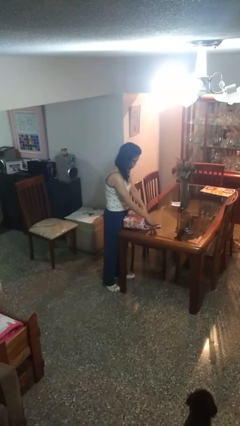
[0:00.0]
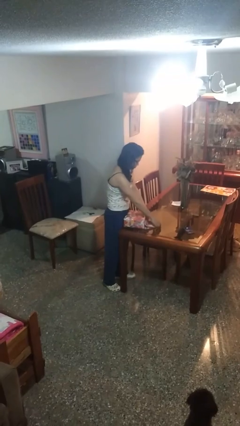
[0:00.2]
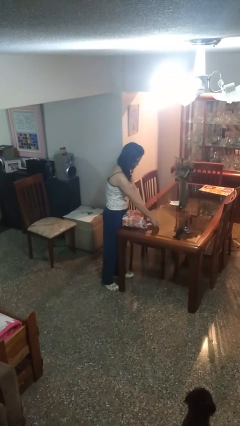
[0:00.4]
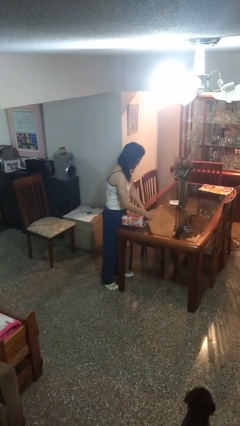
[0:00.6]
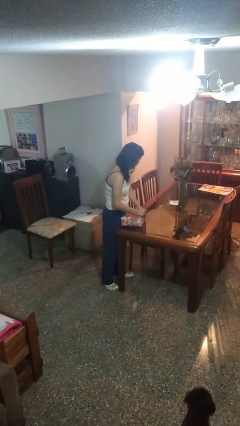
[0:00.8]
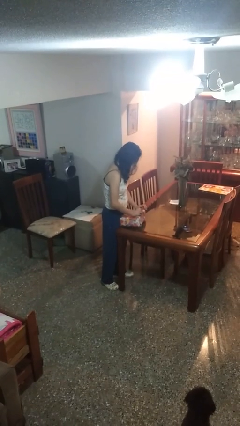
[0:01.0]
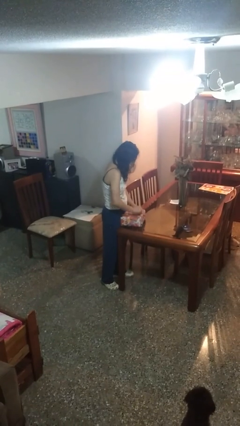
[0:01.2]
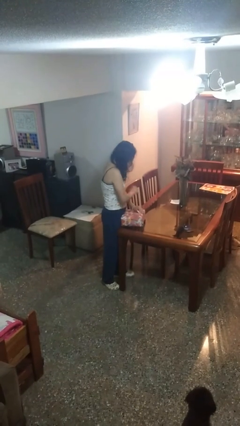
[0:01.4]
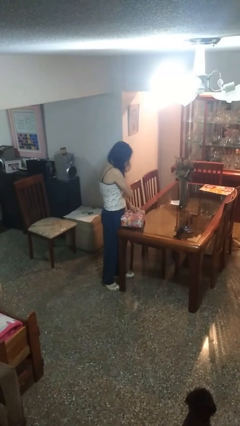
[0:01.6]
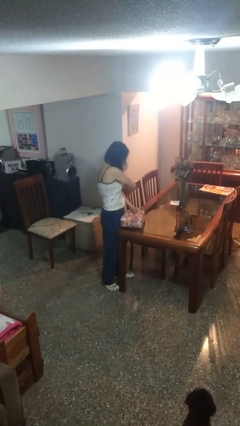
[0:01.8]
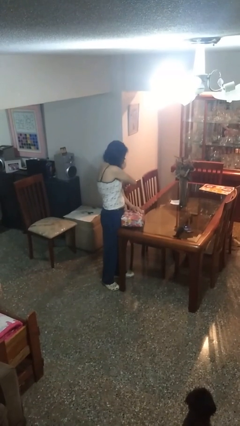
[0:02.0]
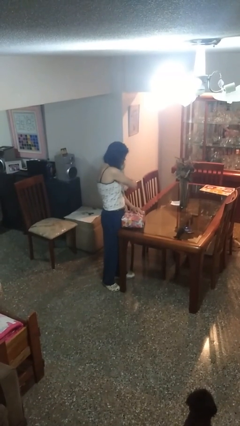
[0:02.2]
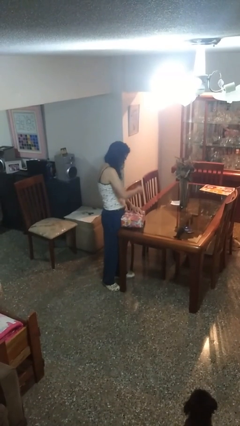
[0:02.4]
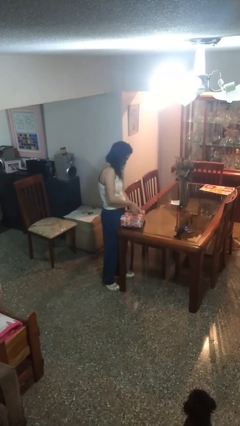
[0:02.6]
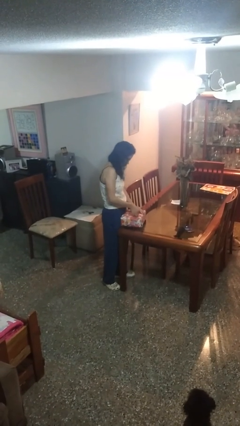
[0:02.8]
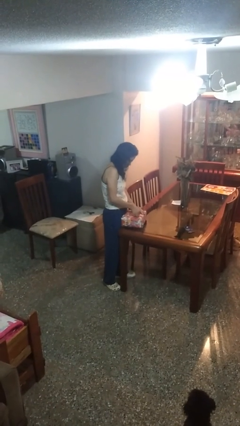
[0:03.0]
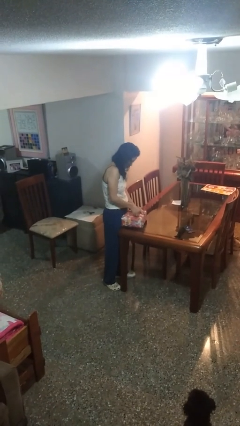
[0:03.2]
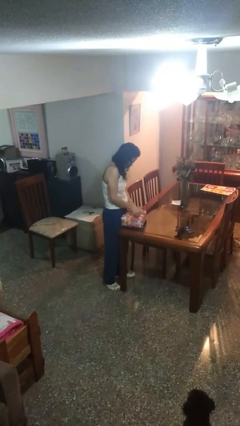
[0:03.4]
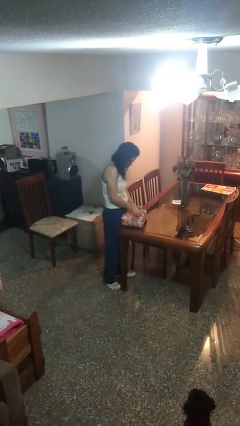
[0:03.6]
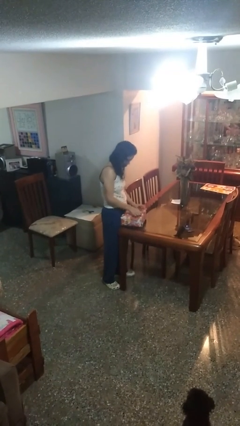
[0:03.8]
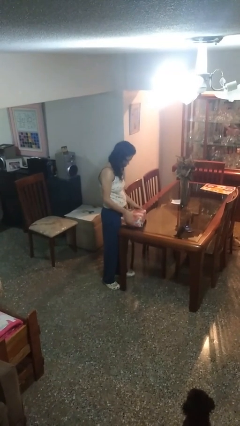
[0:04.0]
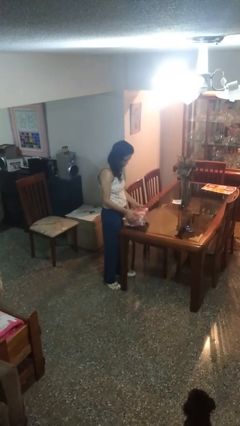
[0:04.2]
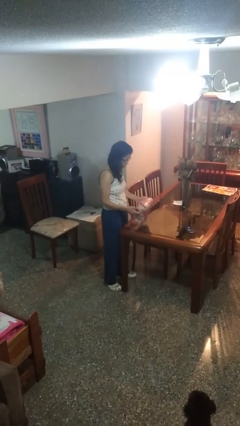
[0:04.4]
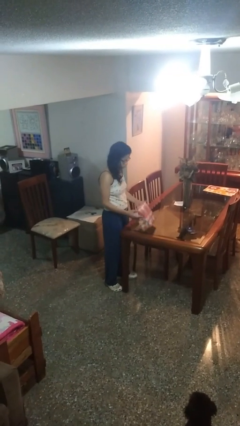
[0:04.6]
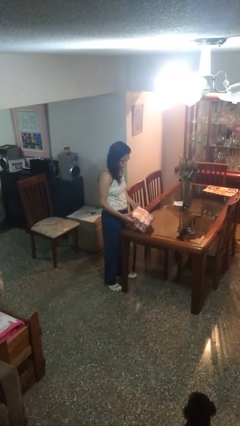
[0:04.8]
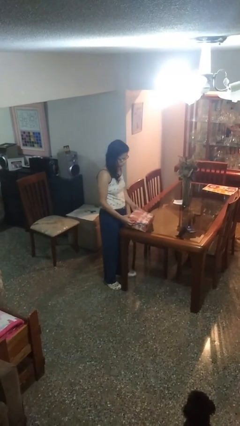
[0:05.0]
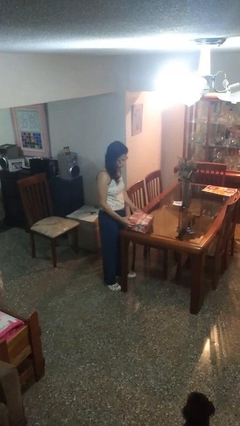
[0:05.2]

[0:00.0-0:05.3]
person wraps box

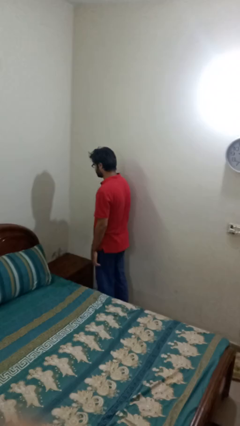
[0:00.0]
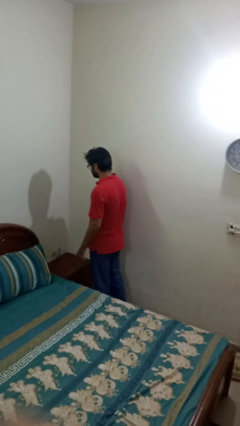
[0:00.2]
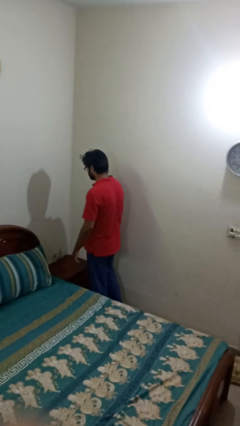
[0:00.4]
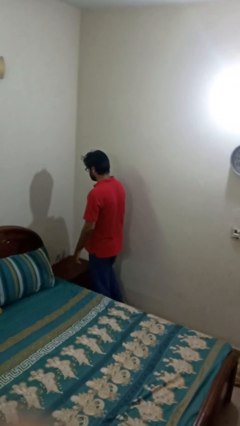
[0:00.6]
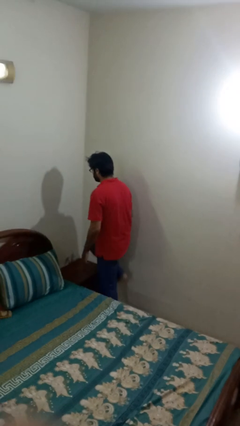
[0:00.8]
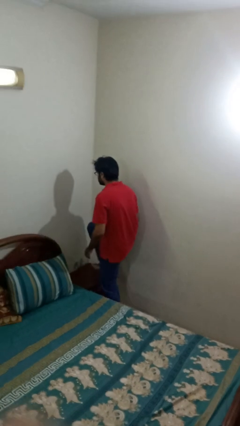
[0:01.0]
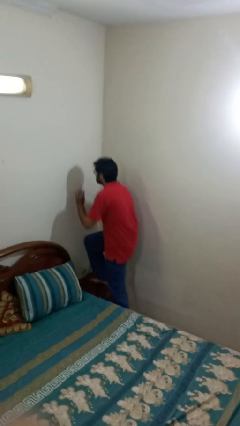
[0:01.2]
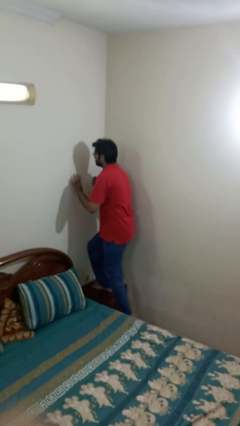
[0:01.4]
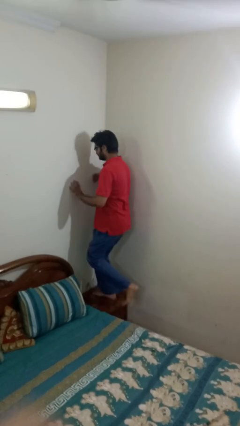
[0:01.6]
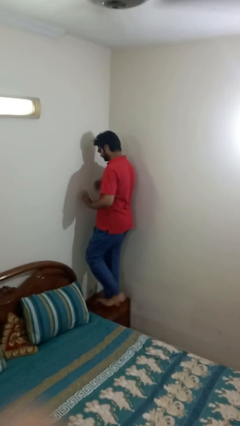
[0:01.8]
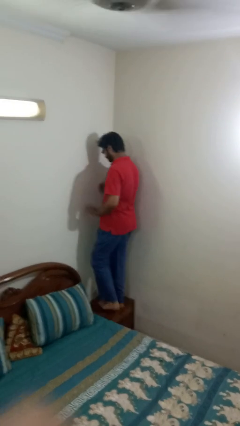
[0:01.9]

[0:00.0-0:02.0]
person climbs on table

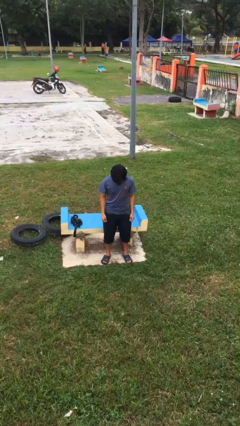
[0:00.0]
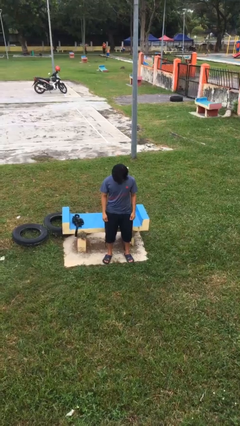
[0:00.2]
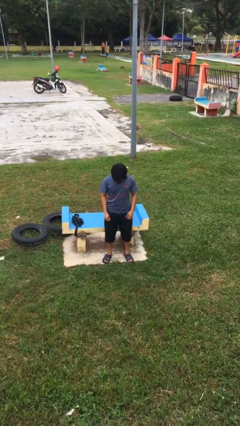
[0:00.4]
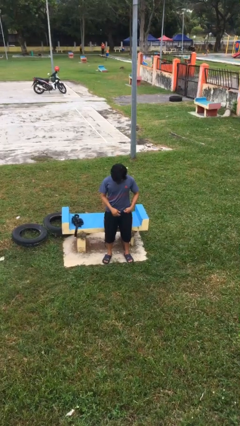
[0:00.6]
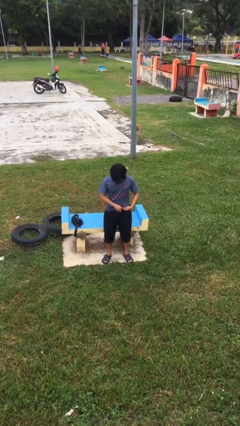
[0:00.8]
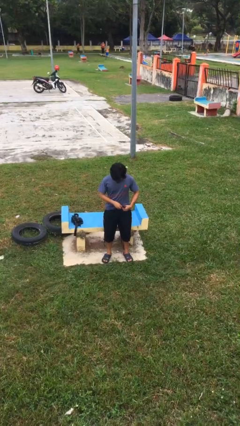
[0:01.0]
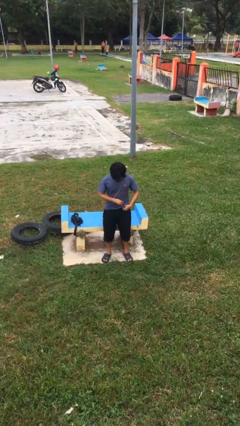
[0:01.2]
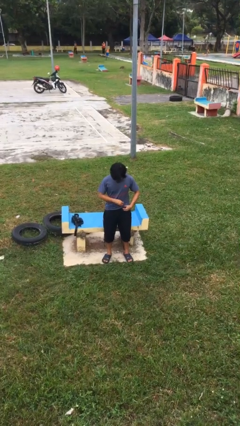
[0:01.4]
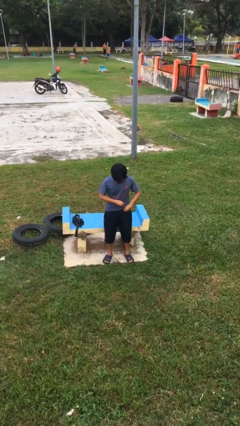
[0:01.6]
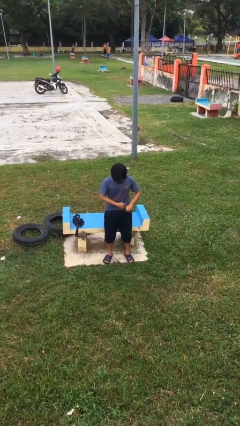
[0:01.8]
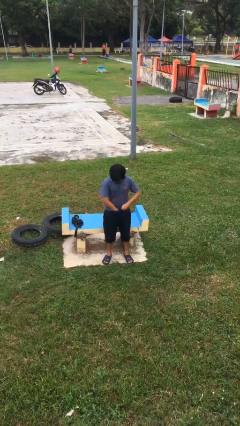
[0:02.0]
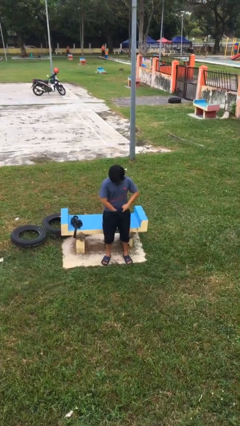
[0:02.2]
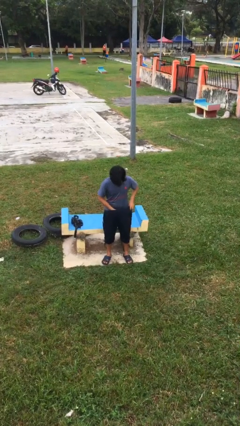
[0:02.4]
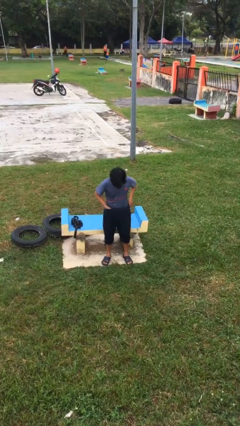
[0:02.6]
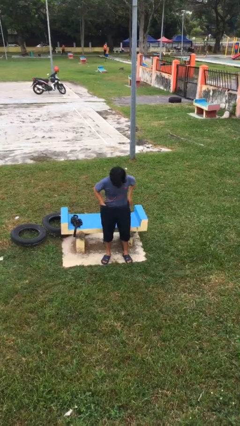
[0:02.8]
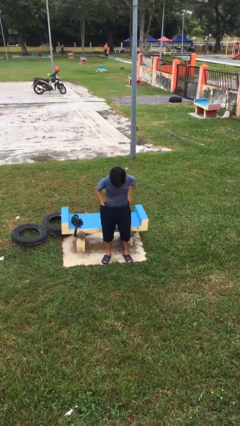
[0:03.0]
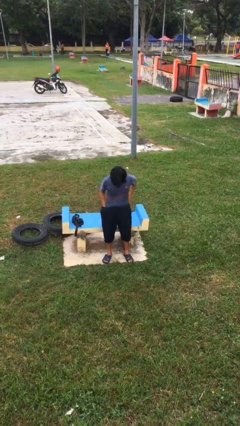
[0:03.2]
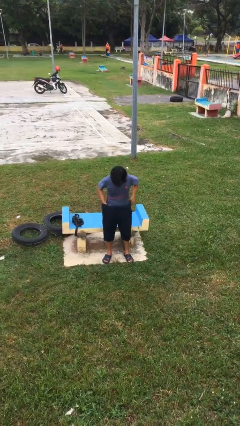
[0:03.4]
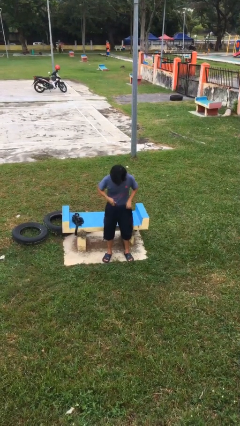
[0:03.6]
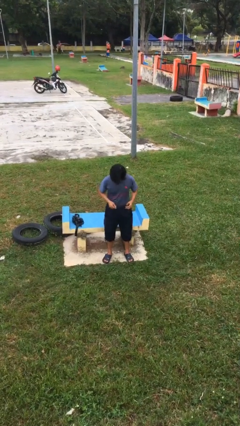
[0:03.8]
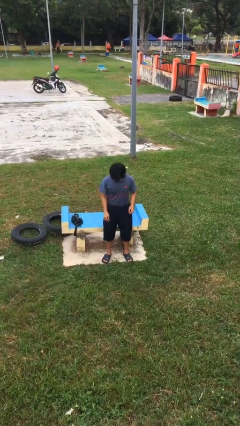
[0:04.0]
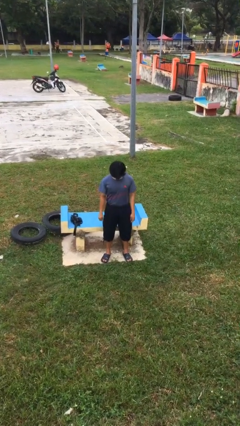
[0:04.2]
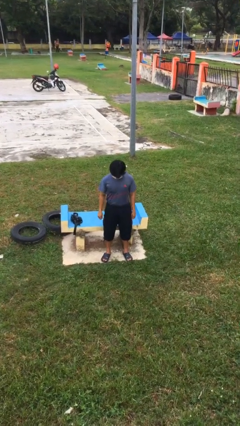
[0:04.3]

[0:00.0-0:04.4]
person tucks in shirt

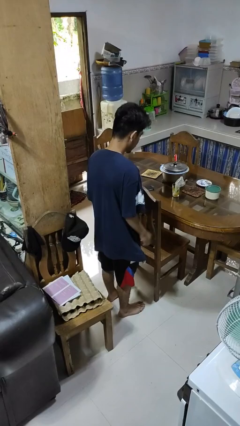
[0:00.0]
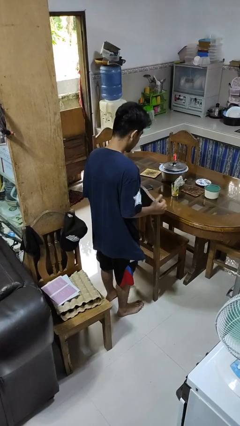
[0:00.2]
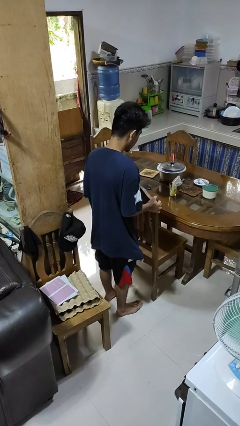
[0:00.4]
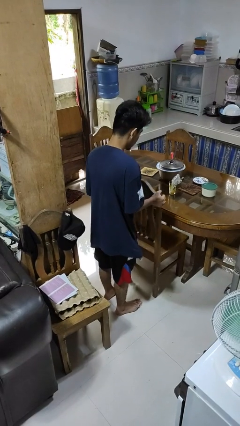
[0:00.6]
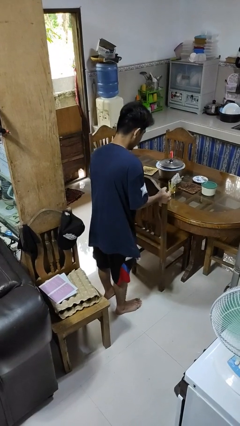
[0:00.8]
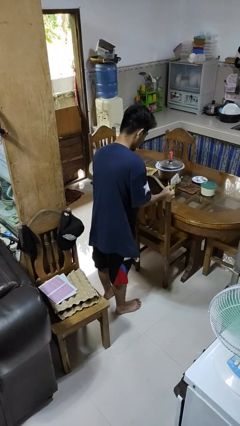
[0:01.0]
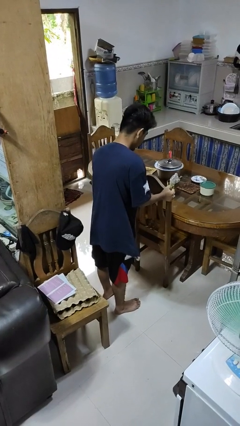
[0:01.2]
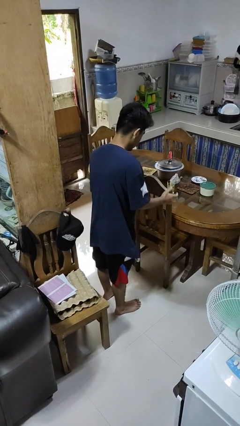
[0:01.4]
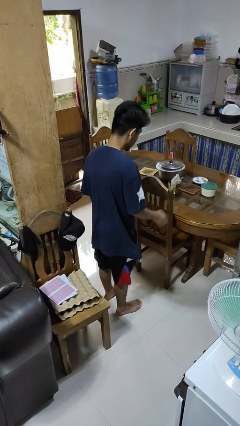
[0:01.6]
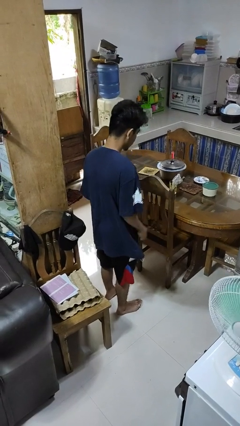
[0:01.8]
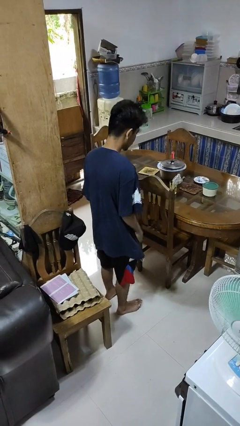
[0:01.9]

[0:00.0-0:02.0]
person pushes in chair

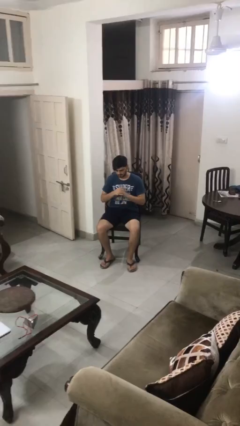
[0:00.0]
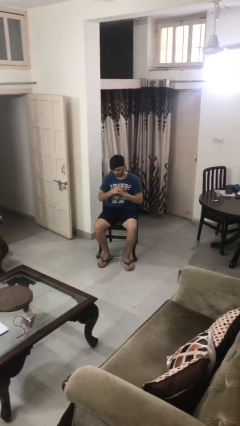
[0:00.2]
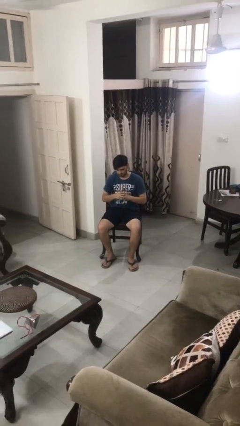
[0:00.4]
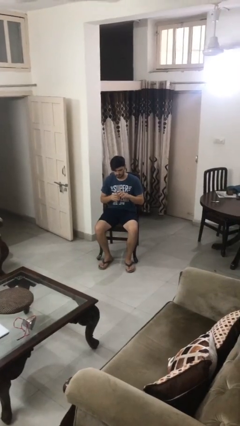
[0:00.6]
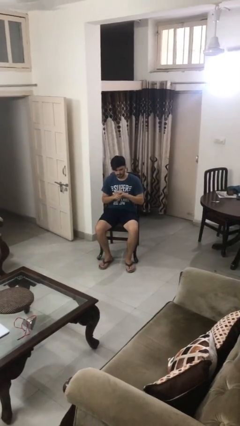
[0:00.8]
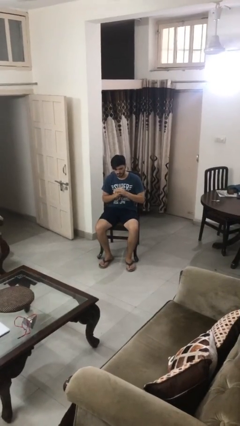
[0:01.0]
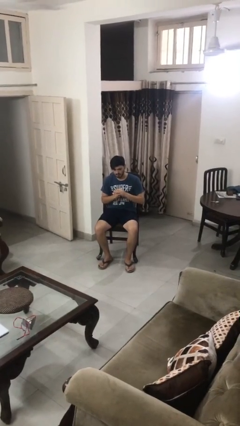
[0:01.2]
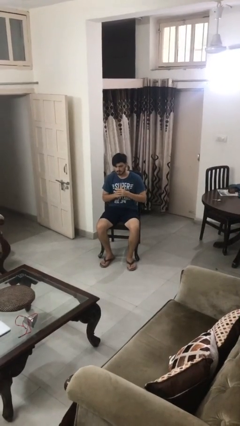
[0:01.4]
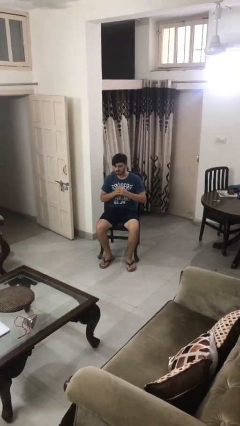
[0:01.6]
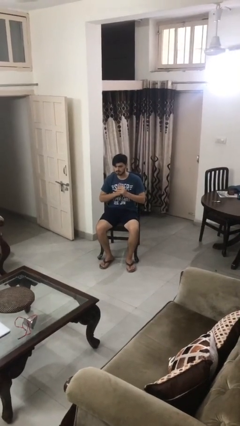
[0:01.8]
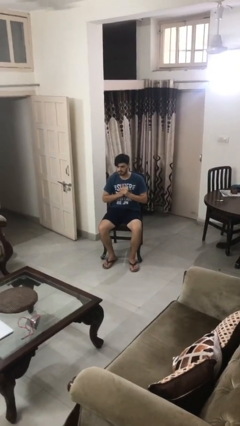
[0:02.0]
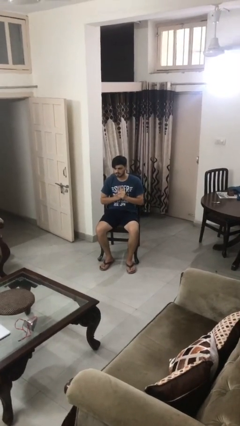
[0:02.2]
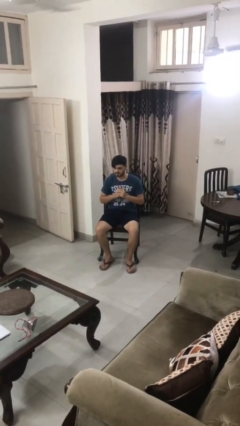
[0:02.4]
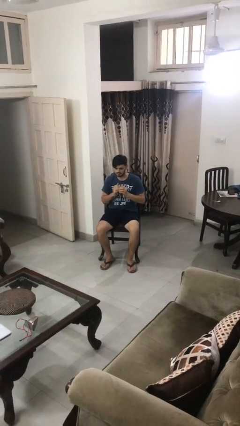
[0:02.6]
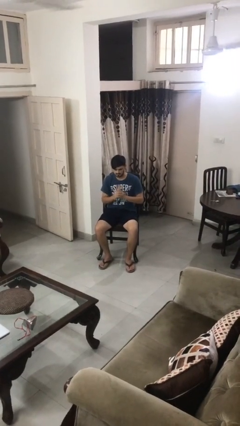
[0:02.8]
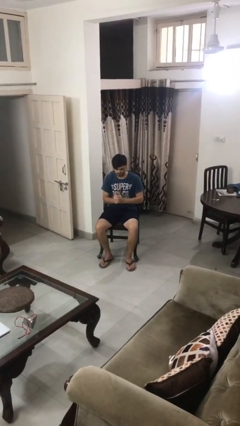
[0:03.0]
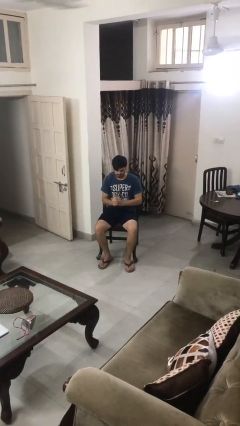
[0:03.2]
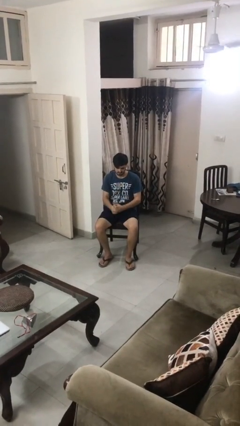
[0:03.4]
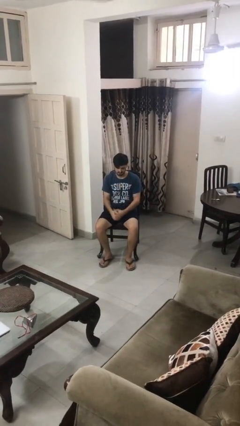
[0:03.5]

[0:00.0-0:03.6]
person cracks knuckles

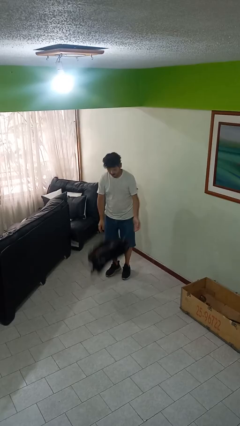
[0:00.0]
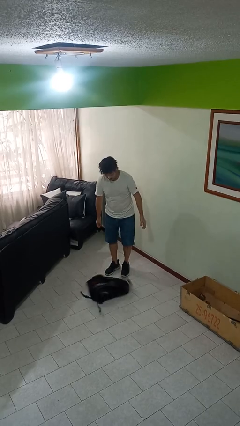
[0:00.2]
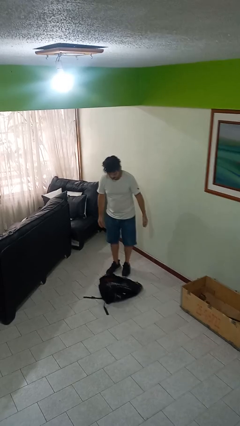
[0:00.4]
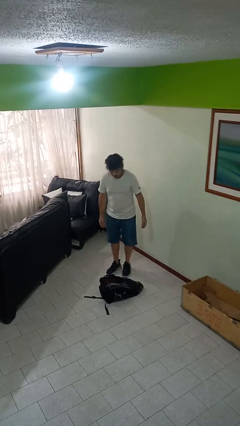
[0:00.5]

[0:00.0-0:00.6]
person drops object
